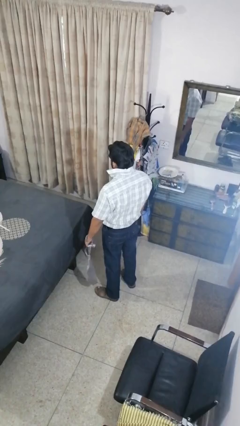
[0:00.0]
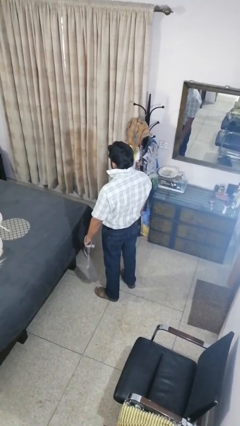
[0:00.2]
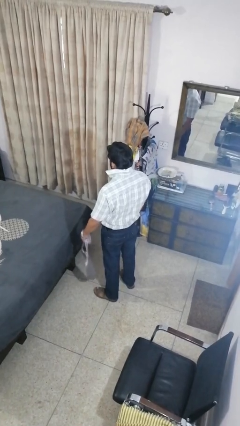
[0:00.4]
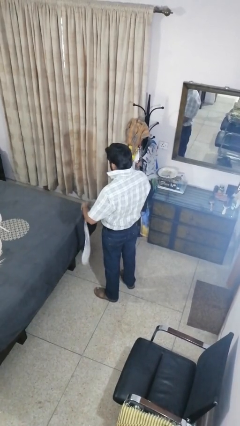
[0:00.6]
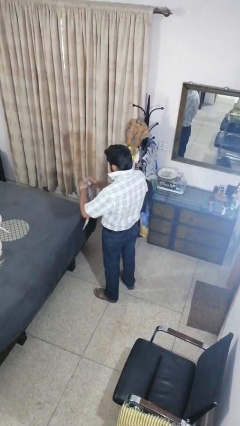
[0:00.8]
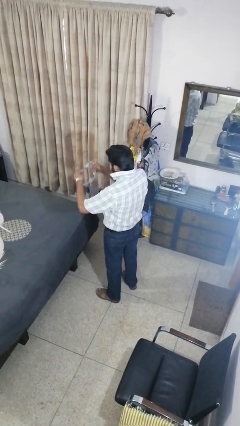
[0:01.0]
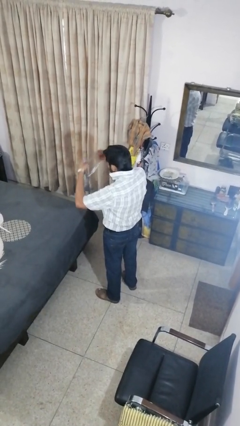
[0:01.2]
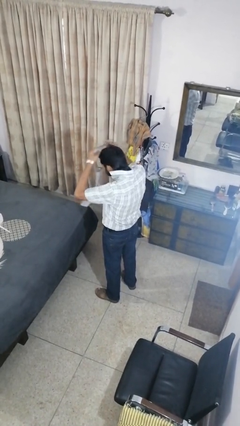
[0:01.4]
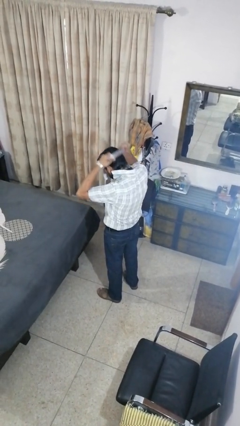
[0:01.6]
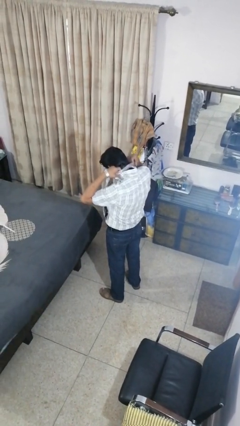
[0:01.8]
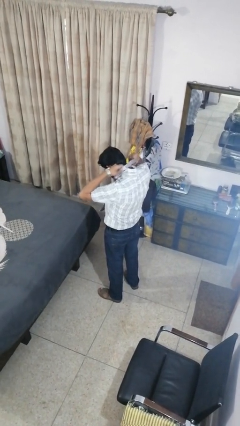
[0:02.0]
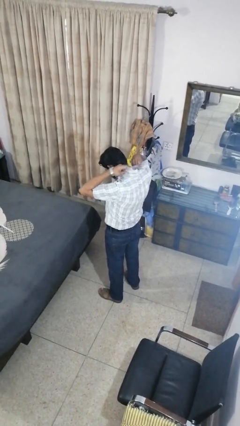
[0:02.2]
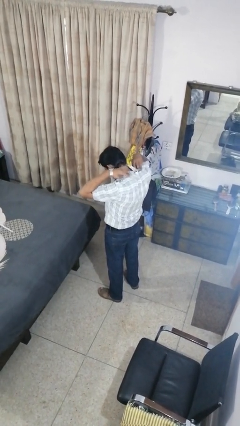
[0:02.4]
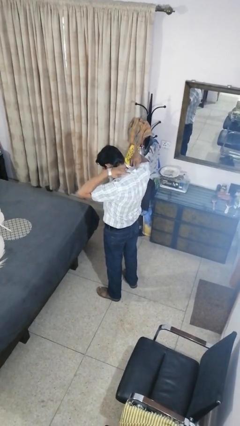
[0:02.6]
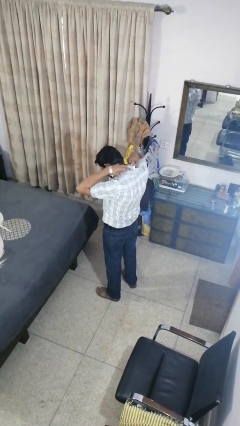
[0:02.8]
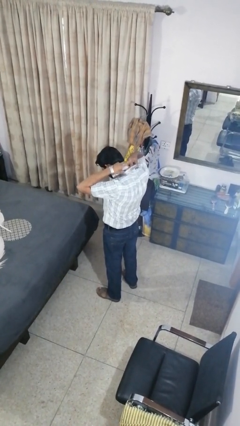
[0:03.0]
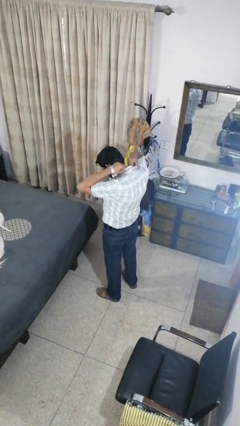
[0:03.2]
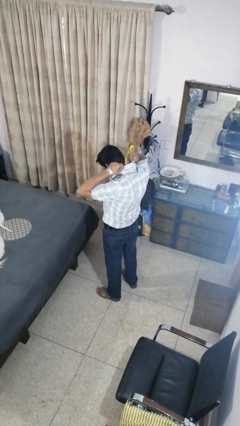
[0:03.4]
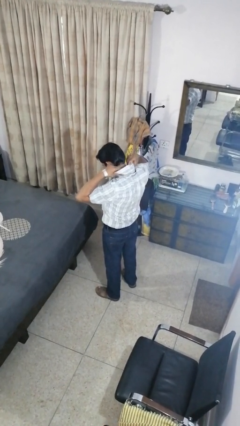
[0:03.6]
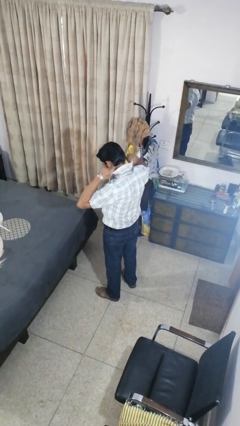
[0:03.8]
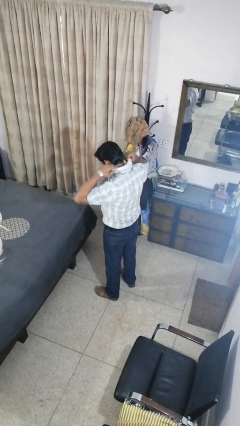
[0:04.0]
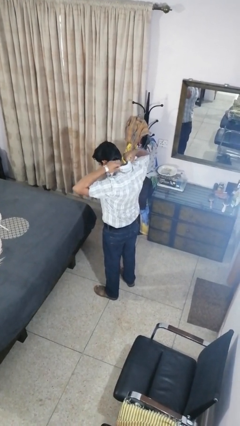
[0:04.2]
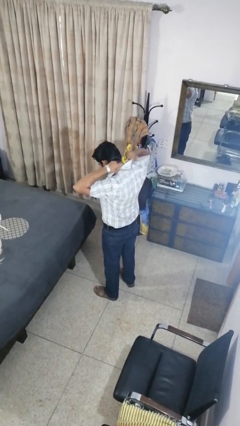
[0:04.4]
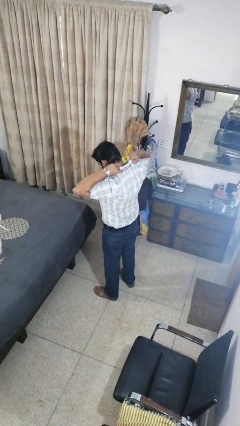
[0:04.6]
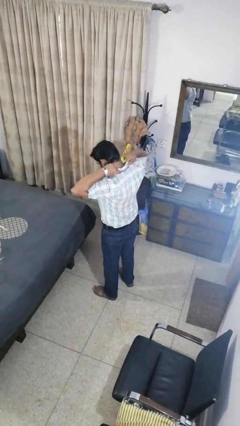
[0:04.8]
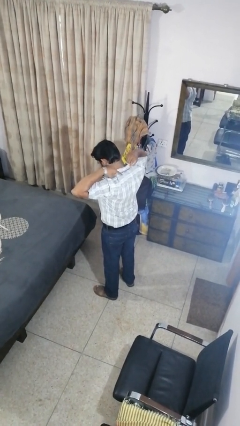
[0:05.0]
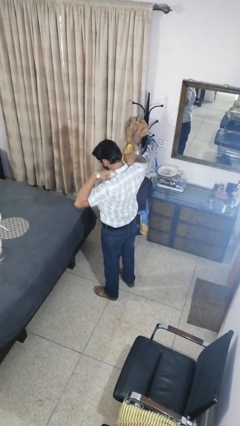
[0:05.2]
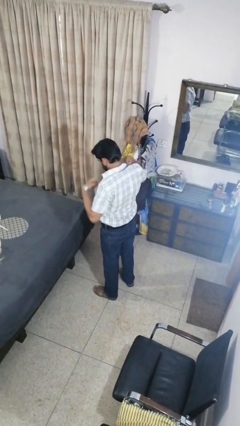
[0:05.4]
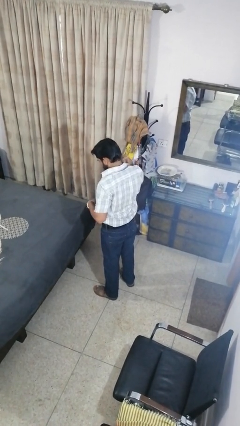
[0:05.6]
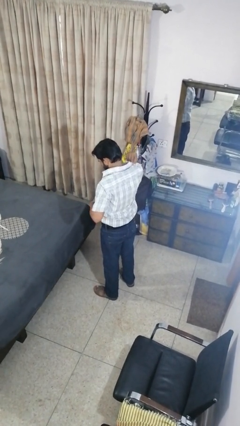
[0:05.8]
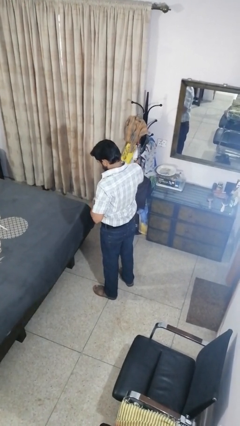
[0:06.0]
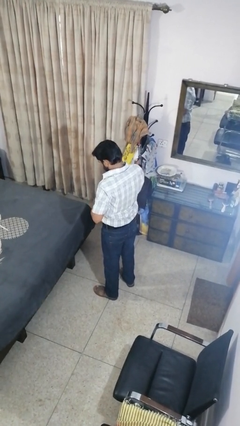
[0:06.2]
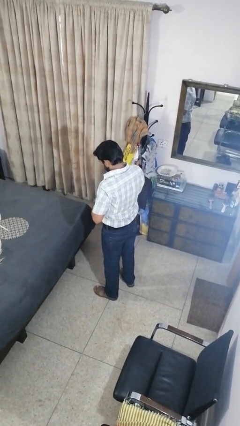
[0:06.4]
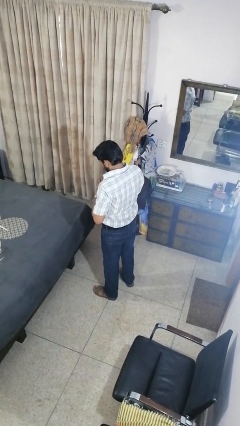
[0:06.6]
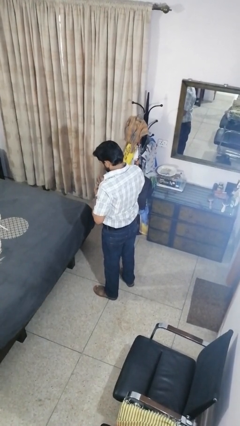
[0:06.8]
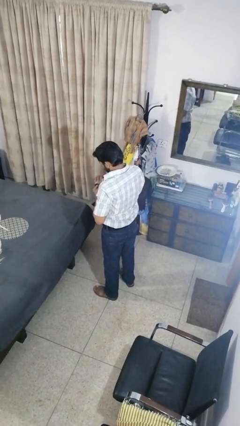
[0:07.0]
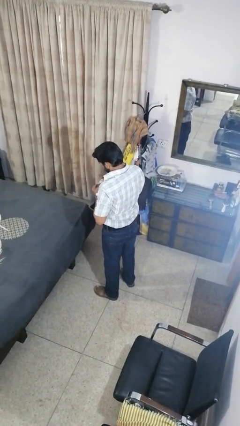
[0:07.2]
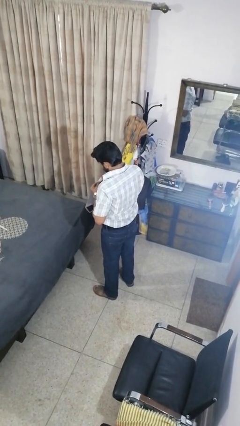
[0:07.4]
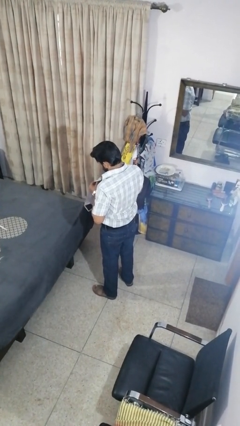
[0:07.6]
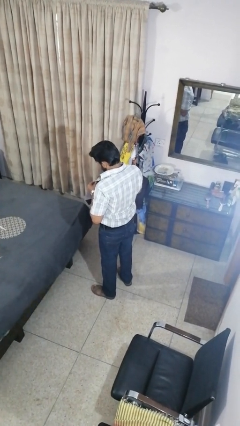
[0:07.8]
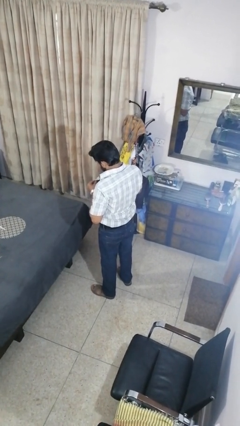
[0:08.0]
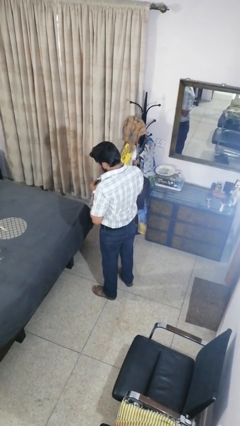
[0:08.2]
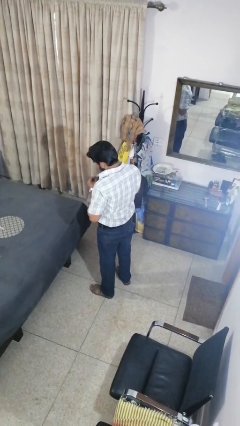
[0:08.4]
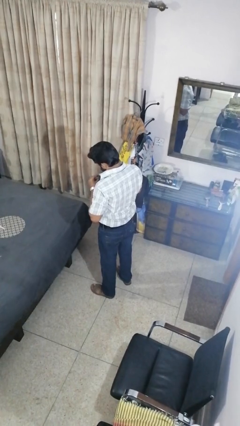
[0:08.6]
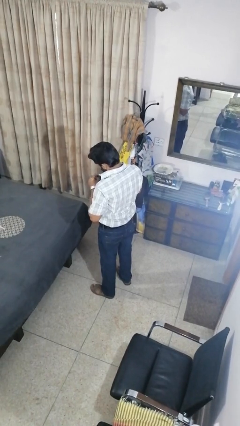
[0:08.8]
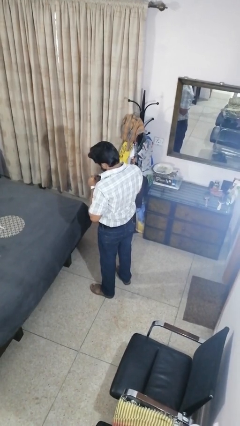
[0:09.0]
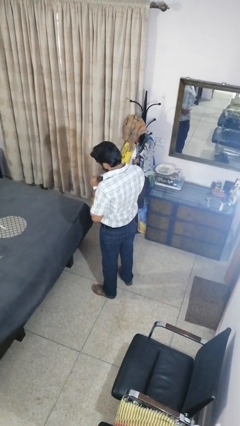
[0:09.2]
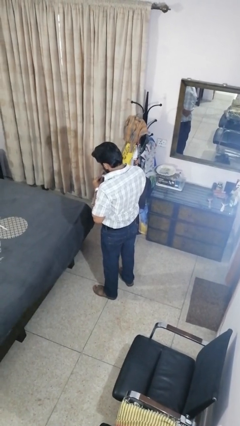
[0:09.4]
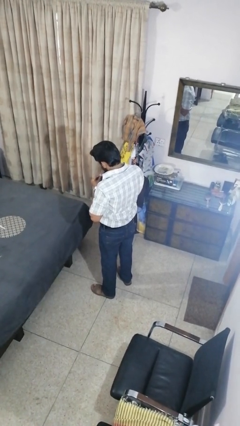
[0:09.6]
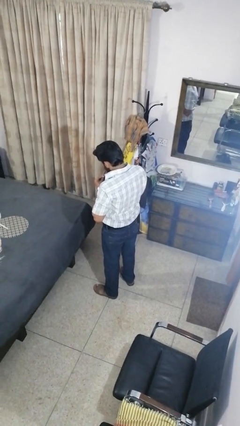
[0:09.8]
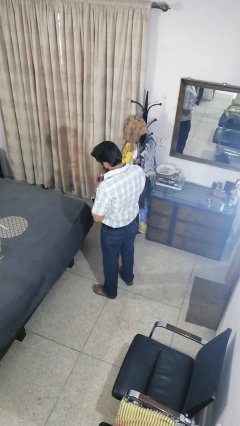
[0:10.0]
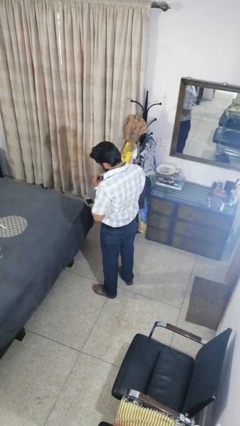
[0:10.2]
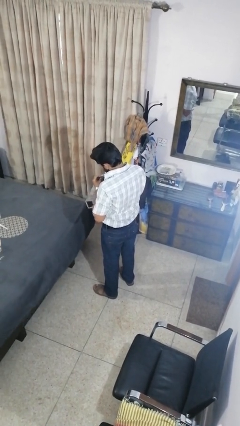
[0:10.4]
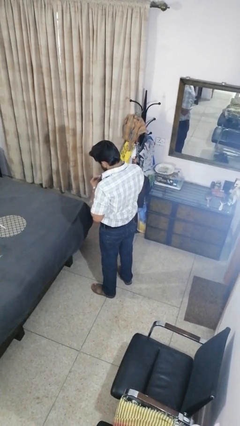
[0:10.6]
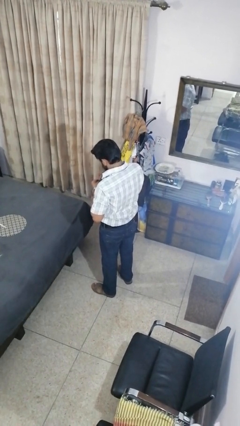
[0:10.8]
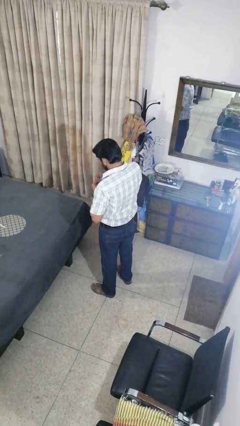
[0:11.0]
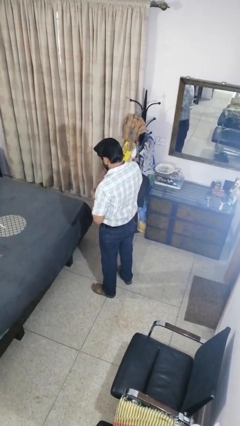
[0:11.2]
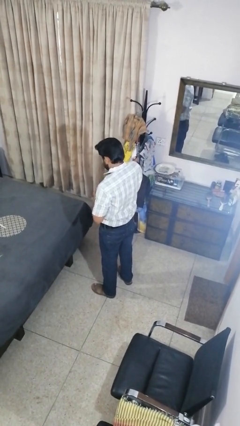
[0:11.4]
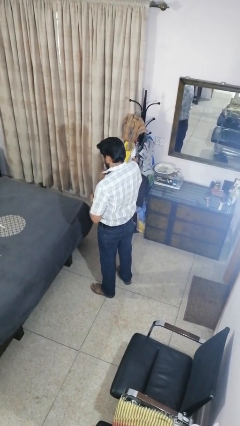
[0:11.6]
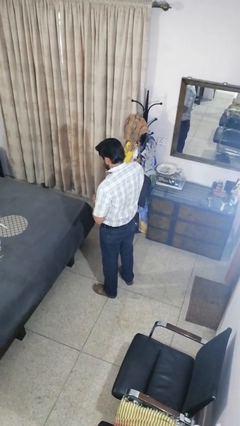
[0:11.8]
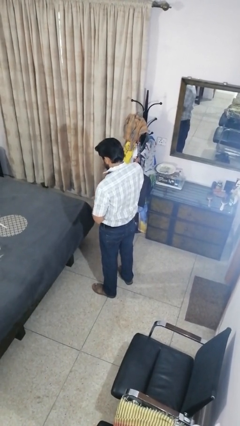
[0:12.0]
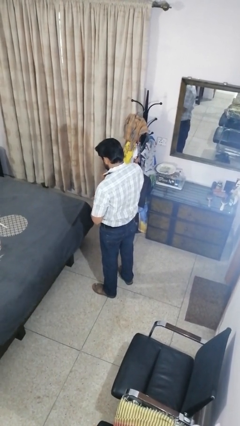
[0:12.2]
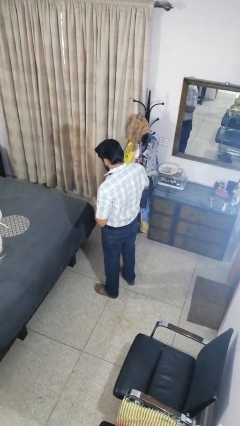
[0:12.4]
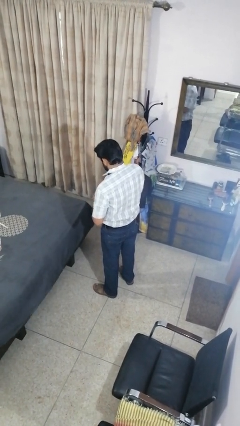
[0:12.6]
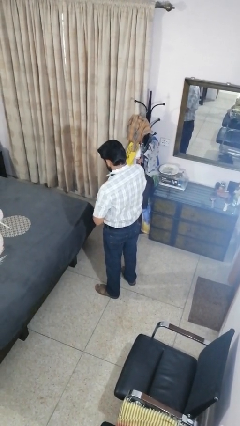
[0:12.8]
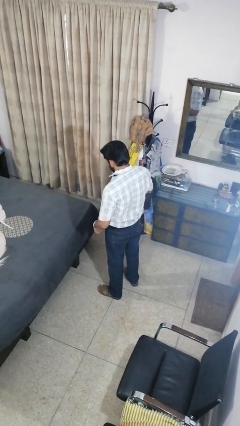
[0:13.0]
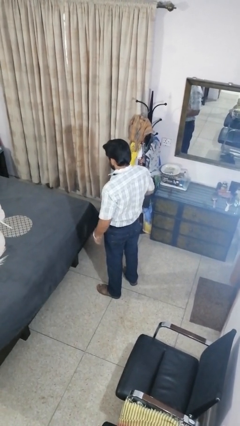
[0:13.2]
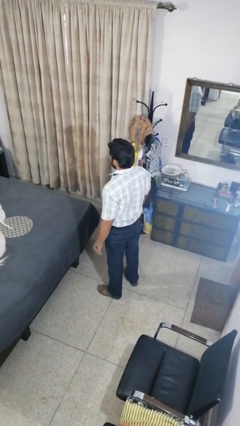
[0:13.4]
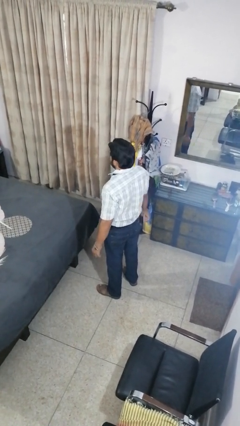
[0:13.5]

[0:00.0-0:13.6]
person puts on necktie

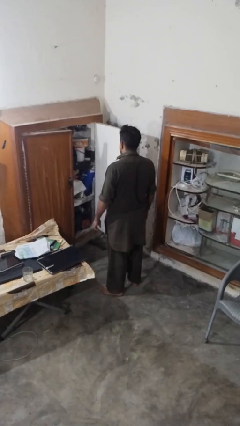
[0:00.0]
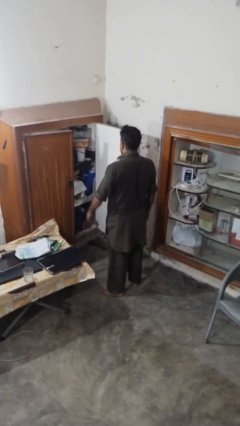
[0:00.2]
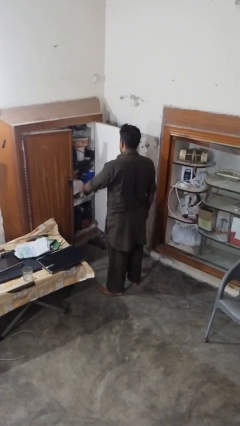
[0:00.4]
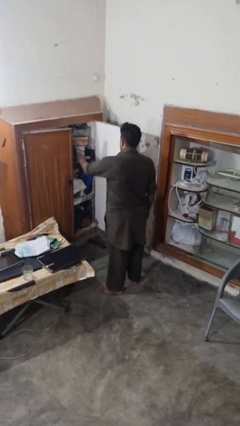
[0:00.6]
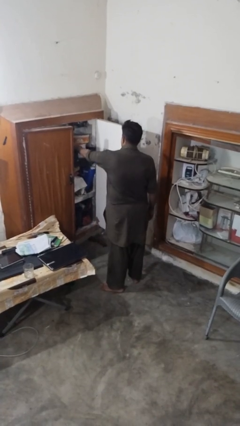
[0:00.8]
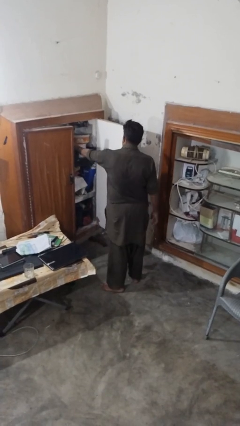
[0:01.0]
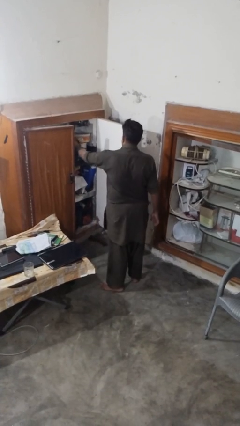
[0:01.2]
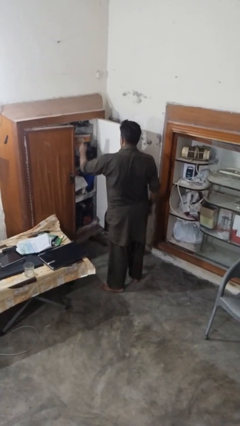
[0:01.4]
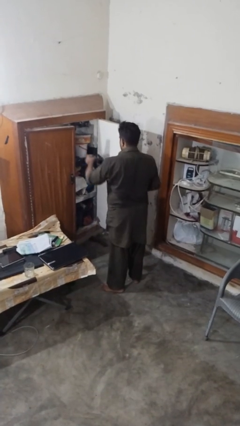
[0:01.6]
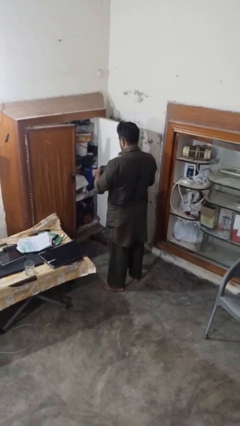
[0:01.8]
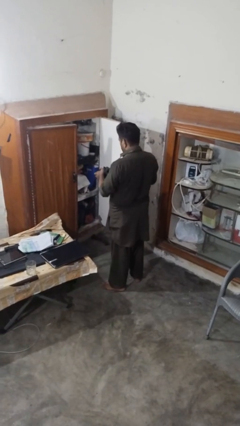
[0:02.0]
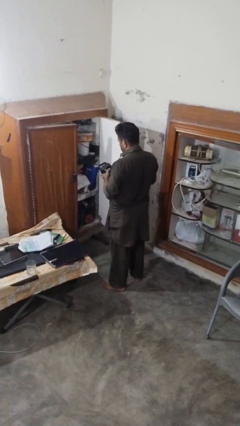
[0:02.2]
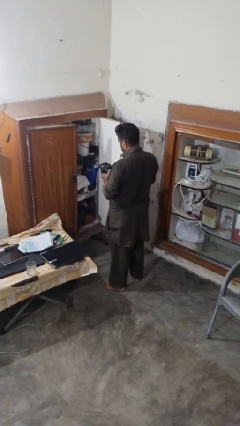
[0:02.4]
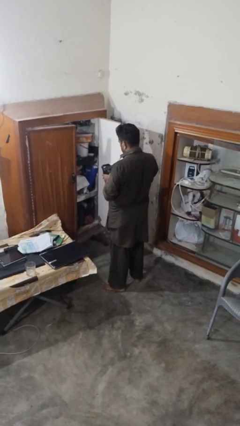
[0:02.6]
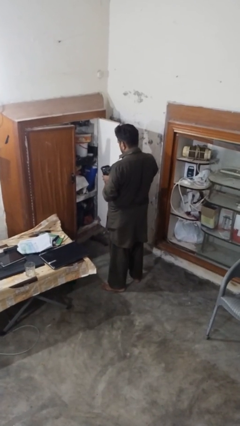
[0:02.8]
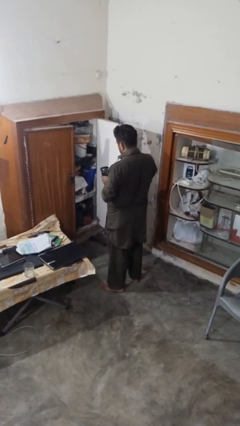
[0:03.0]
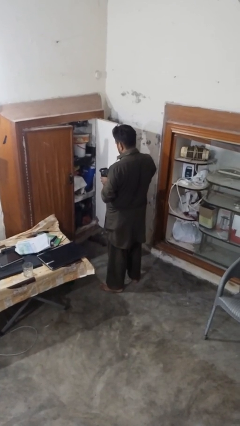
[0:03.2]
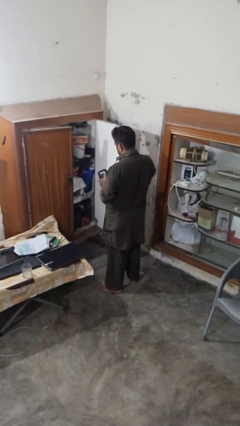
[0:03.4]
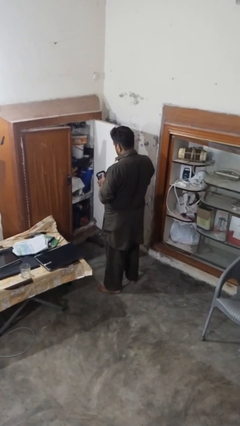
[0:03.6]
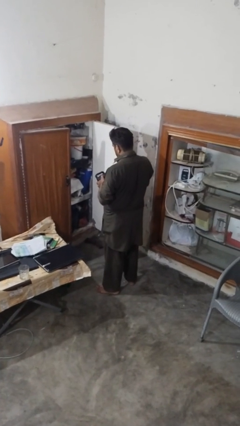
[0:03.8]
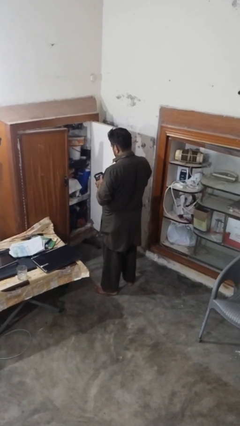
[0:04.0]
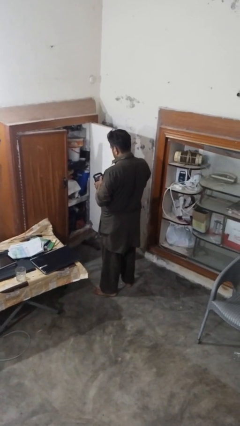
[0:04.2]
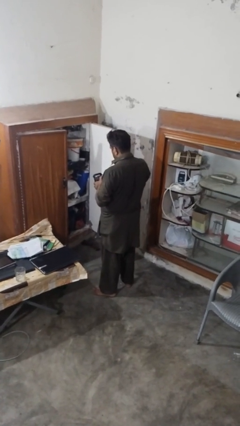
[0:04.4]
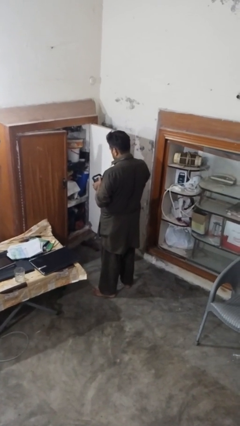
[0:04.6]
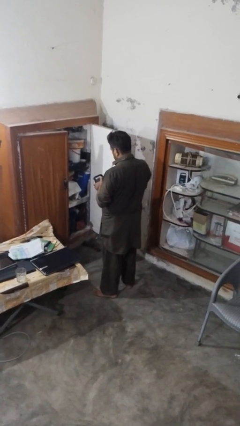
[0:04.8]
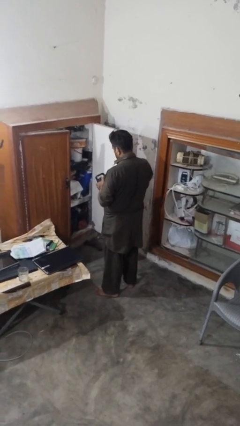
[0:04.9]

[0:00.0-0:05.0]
person picks up object from cabinet
